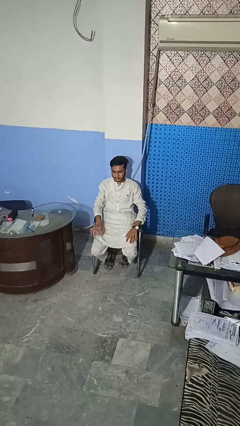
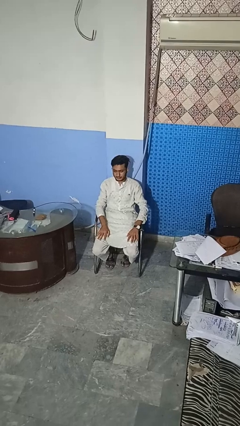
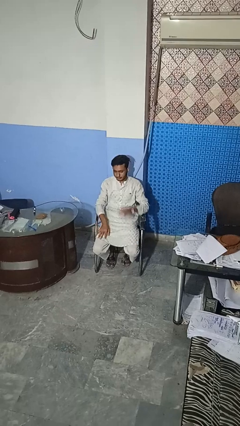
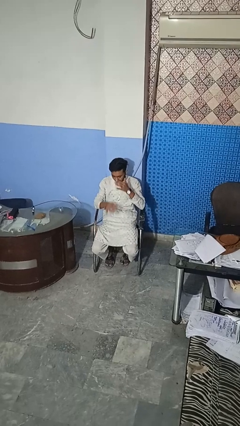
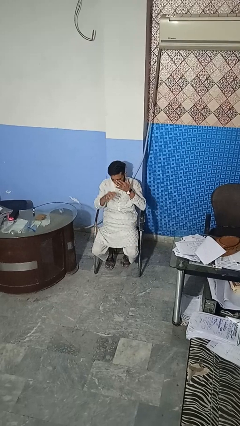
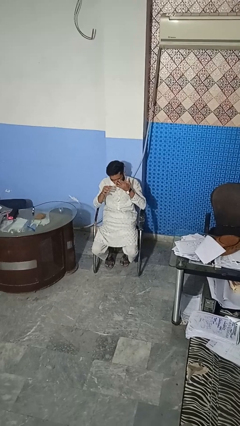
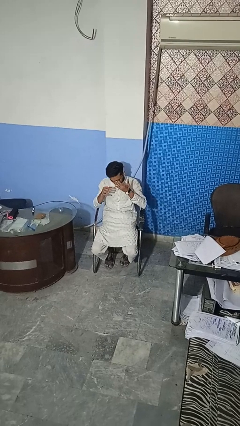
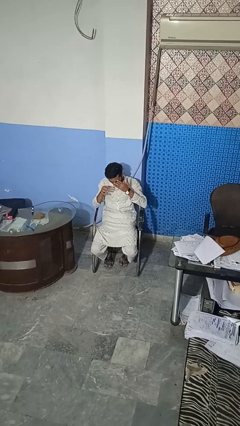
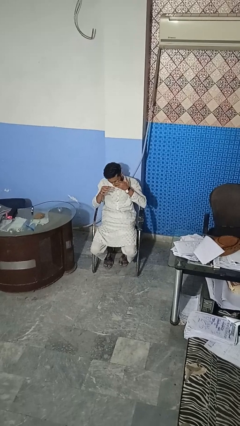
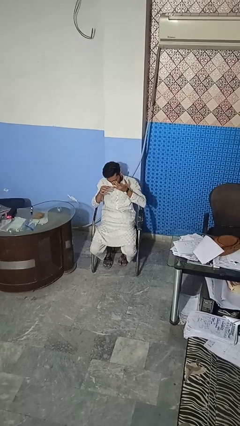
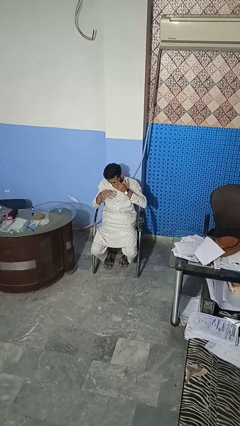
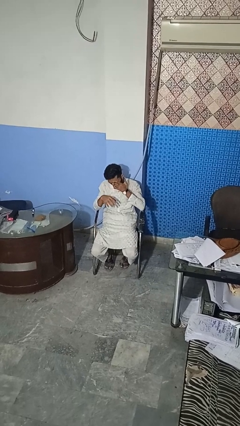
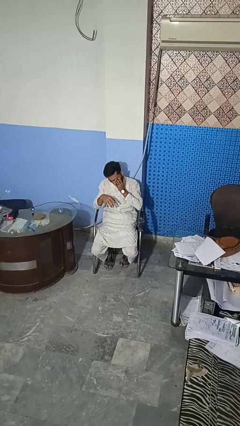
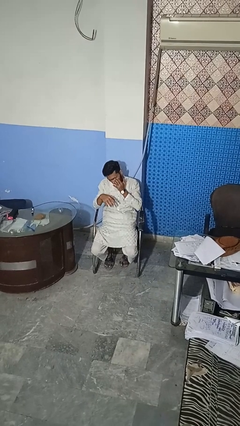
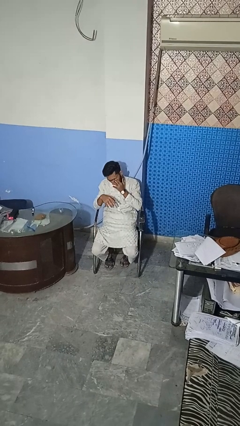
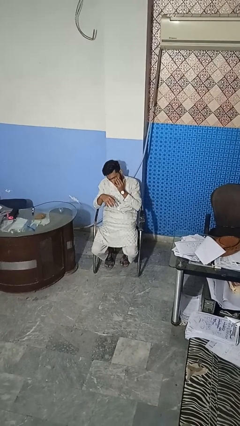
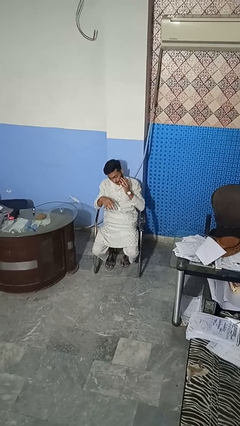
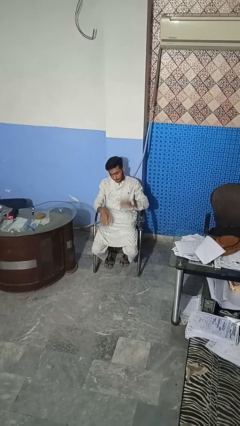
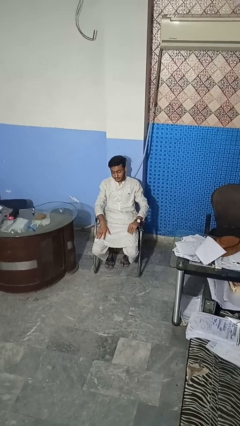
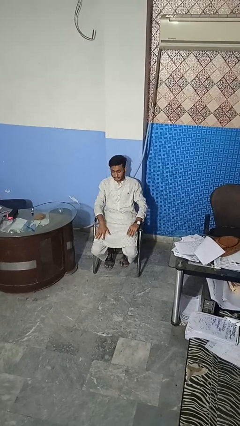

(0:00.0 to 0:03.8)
person rubs eyes

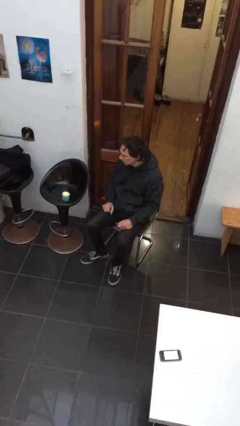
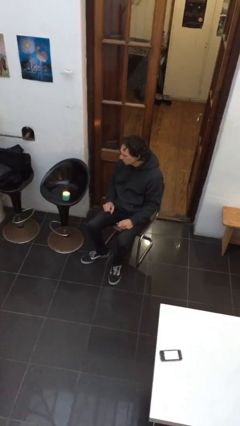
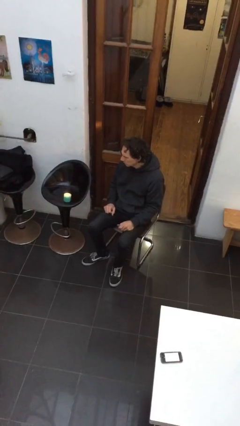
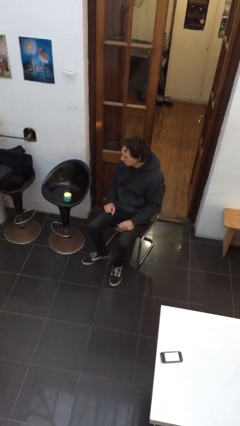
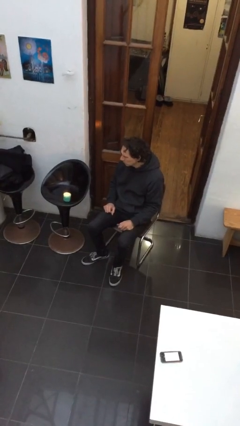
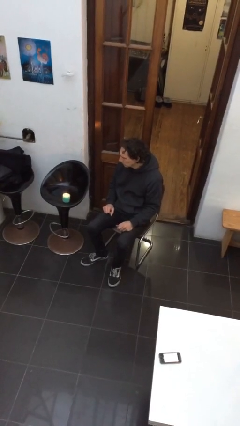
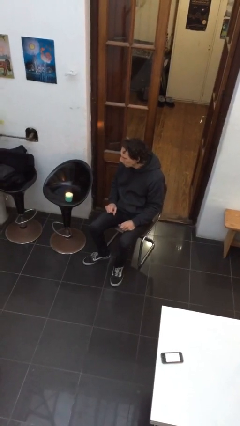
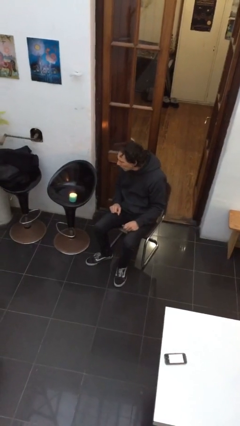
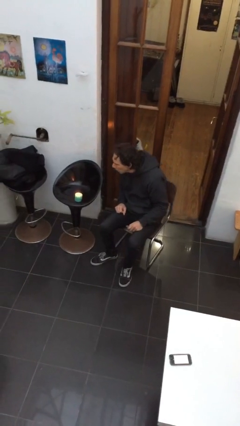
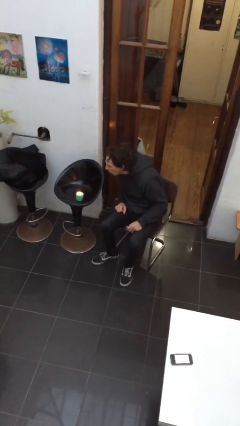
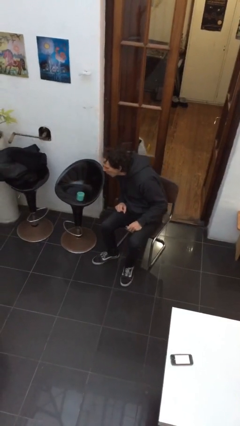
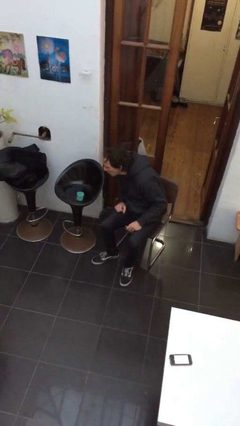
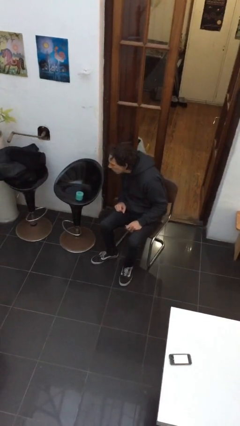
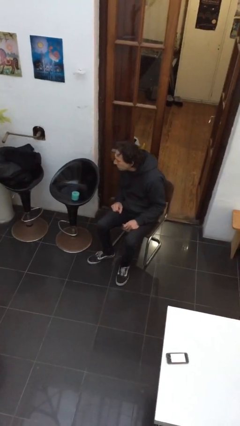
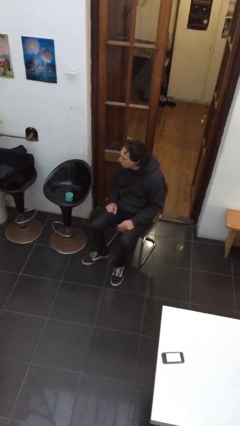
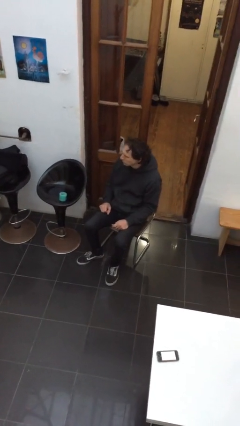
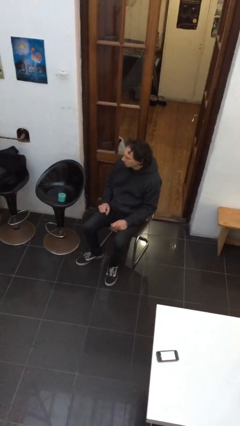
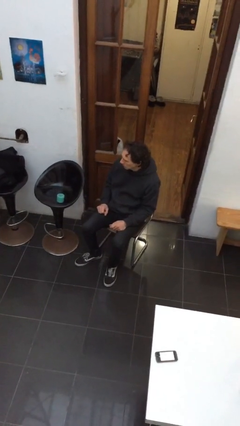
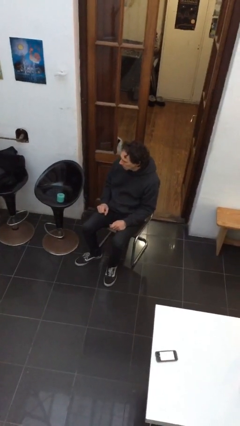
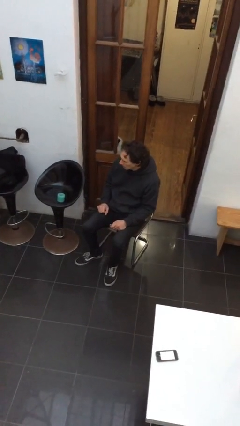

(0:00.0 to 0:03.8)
person extinguishes candle

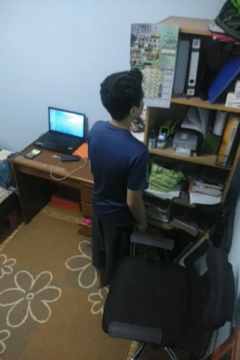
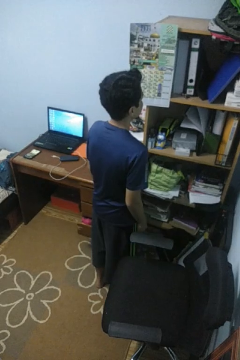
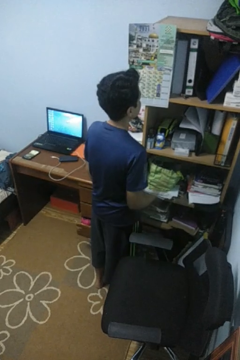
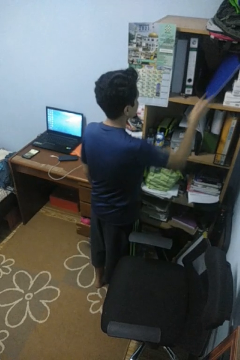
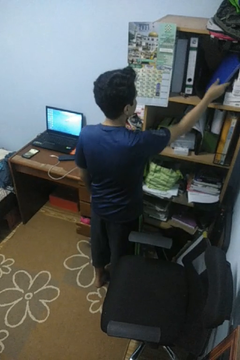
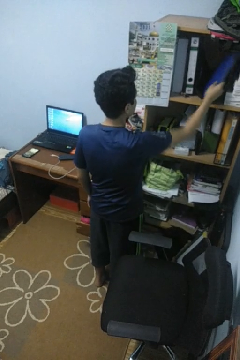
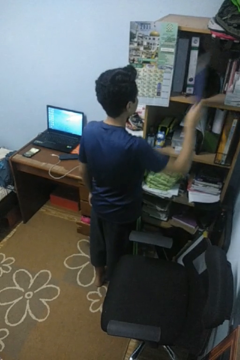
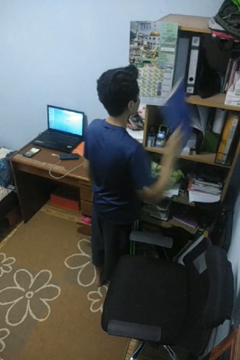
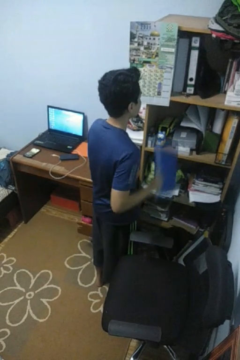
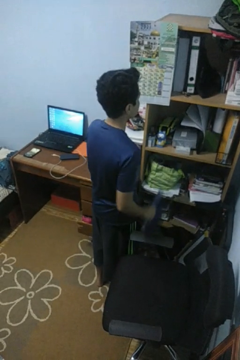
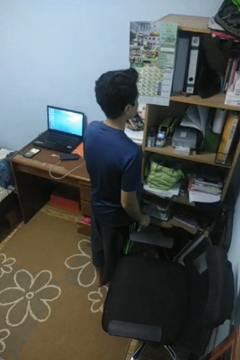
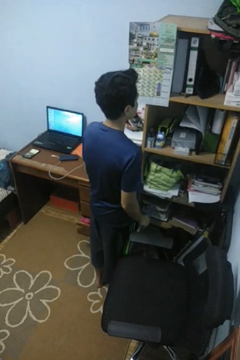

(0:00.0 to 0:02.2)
person picks up object from cabinet

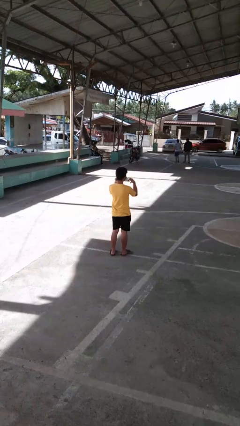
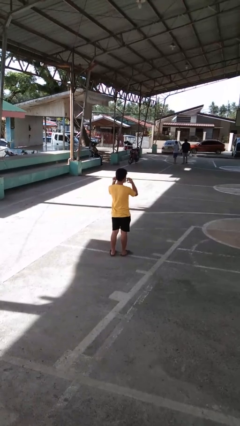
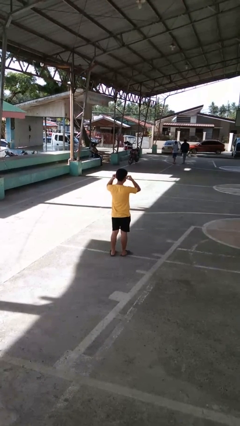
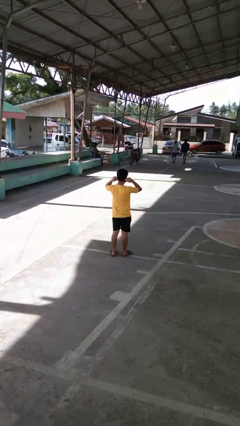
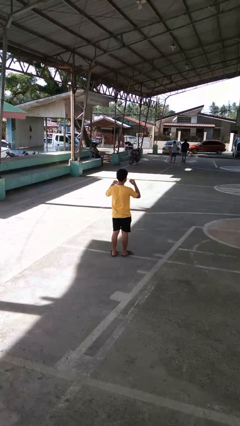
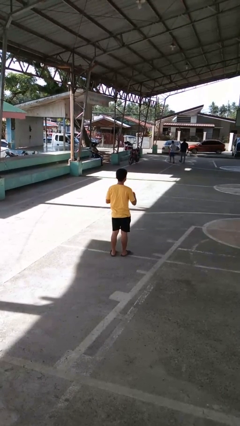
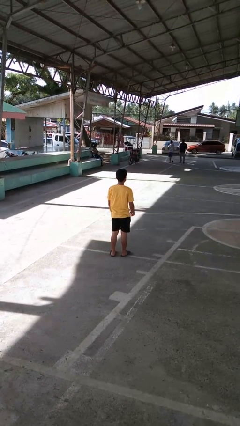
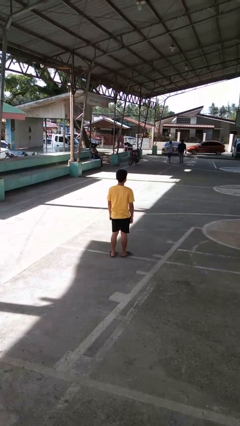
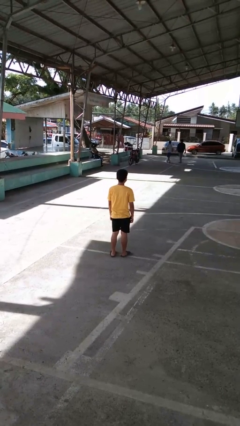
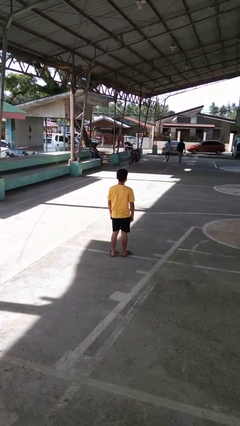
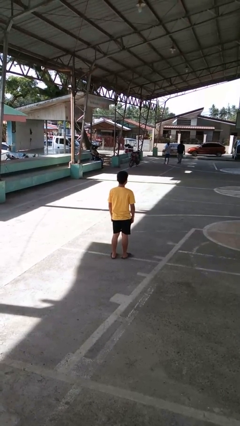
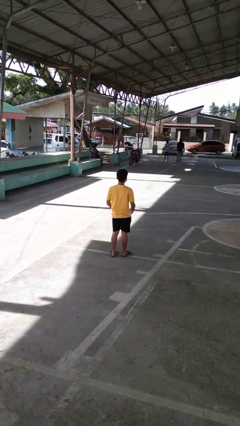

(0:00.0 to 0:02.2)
person puts on facemask

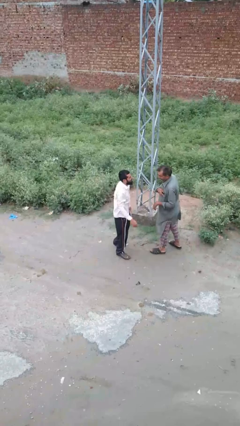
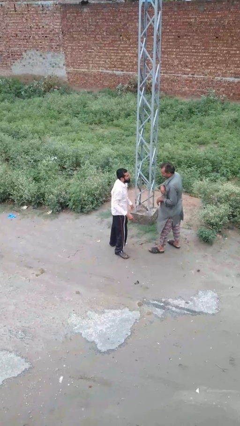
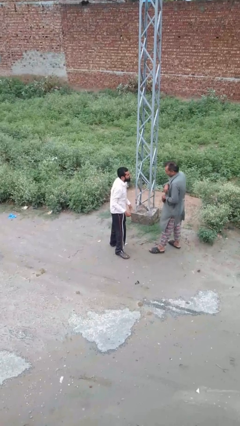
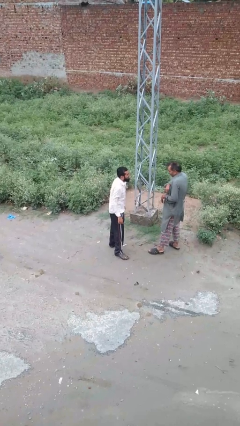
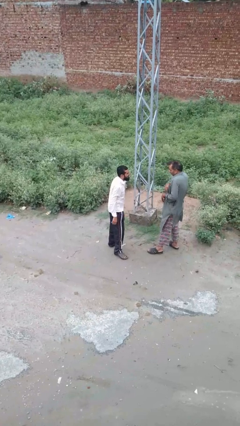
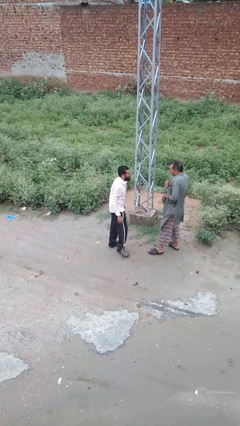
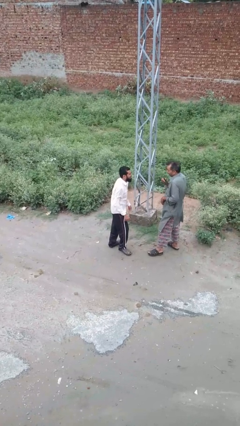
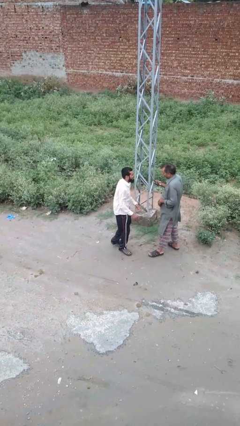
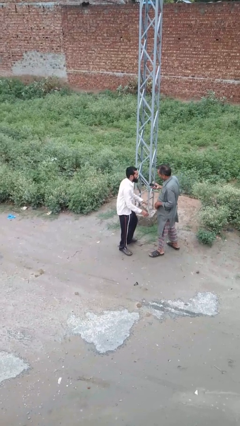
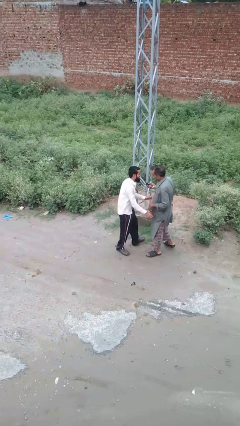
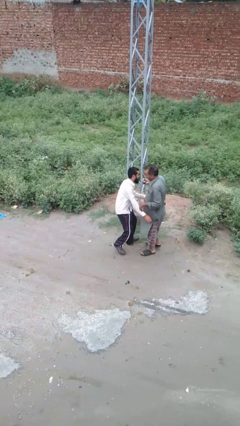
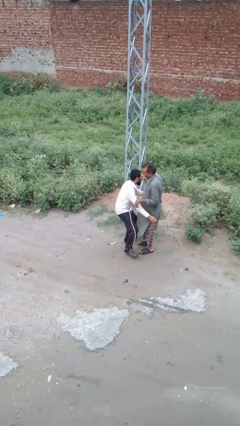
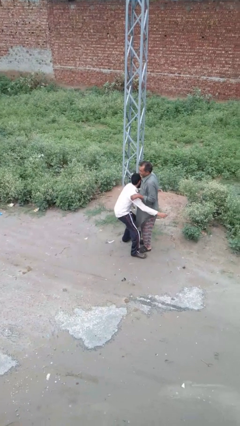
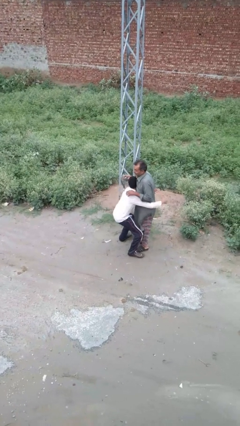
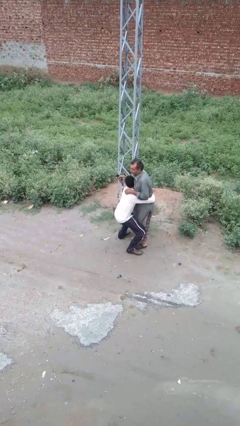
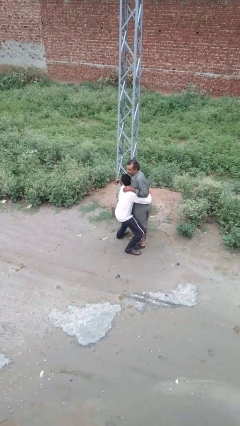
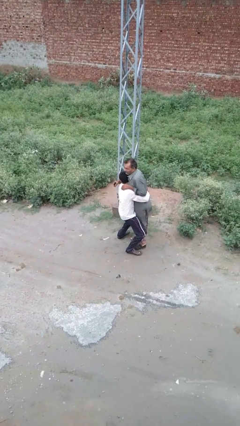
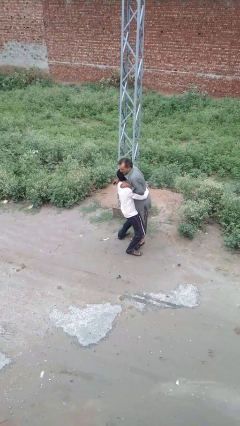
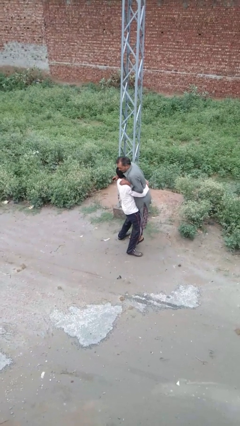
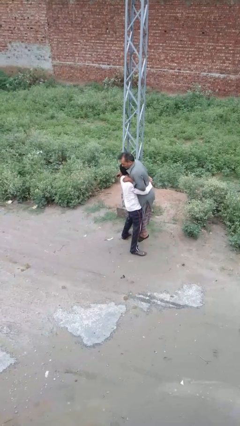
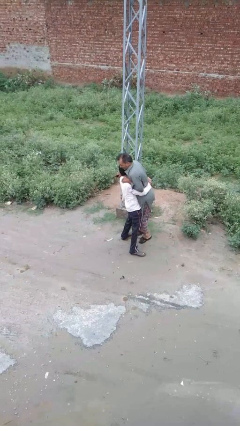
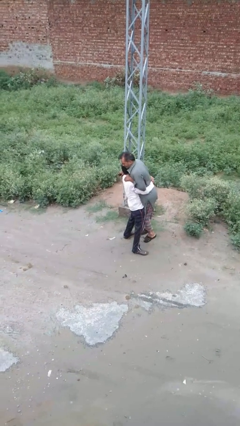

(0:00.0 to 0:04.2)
person picks up person

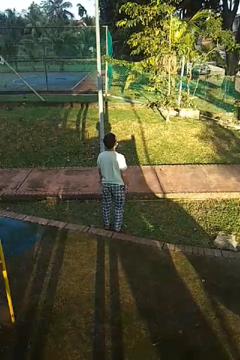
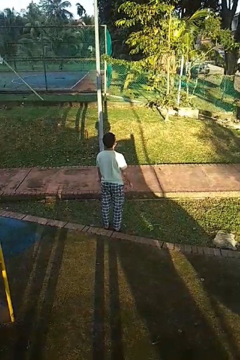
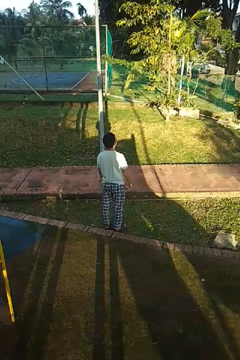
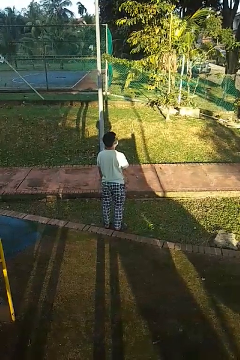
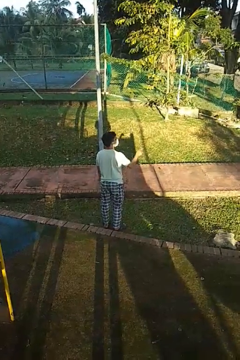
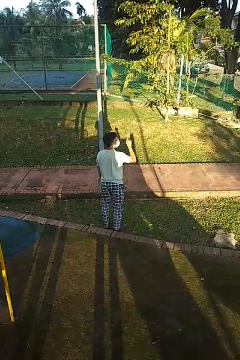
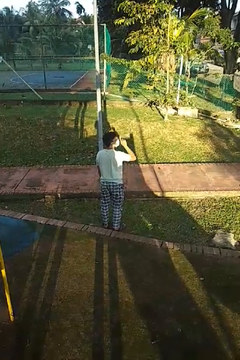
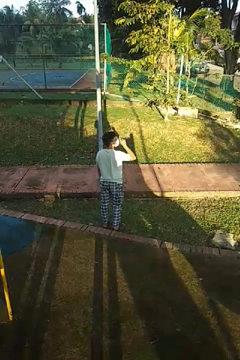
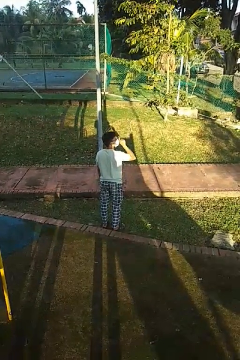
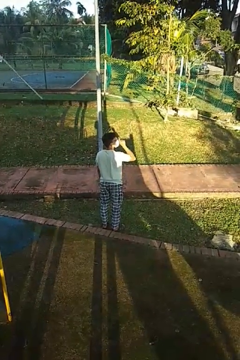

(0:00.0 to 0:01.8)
person gestures be quiet
